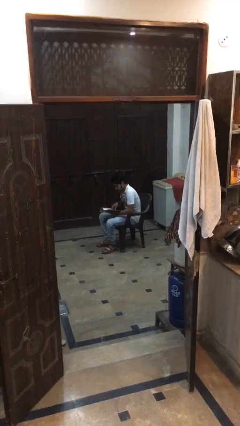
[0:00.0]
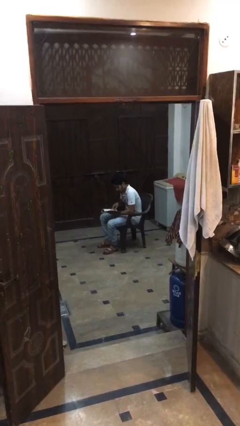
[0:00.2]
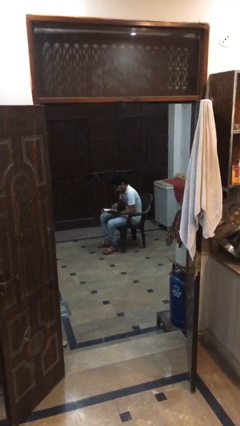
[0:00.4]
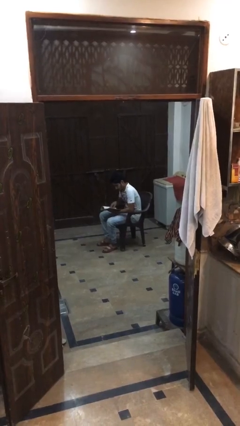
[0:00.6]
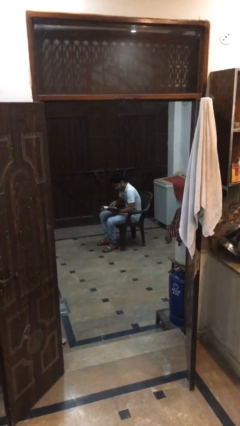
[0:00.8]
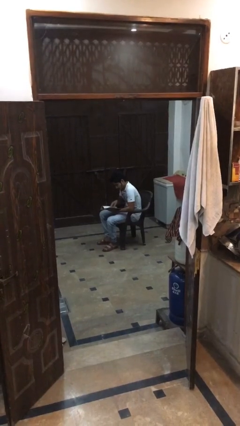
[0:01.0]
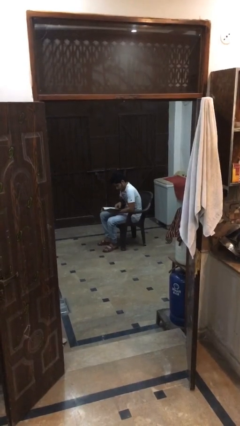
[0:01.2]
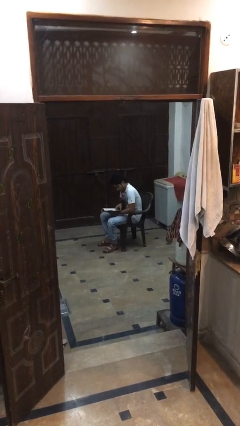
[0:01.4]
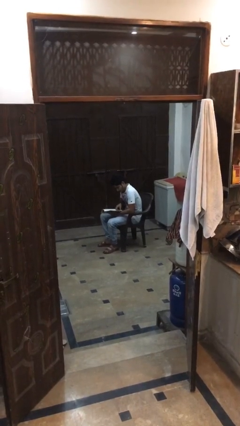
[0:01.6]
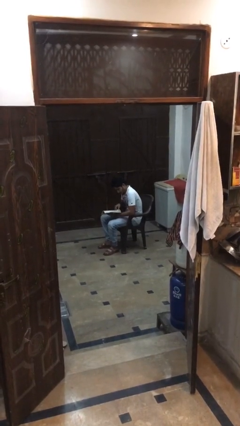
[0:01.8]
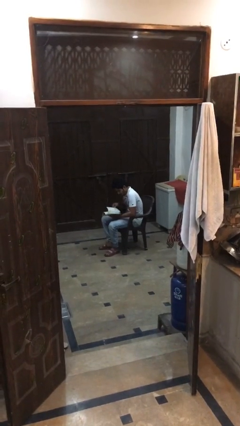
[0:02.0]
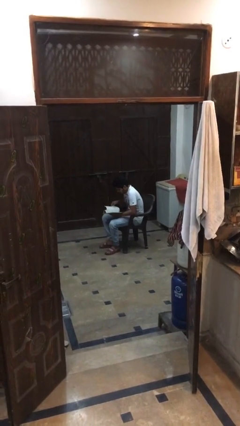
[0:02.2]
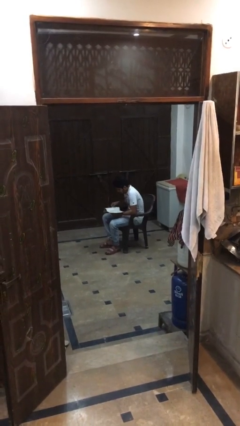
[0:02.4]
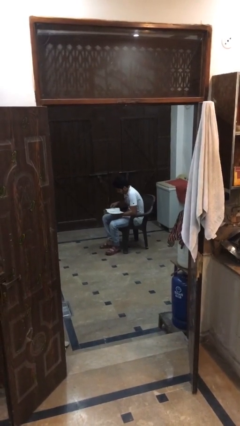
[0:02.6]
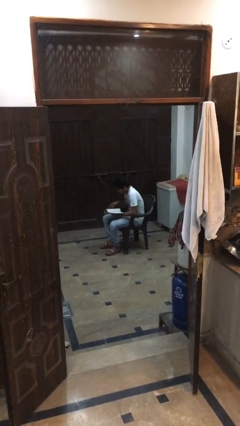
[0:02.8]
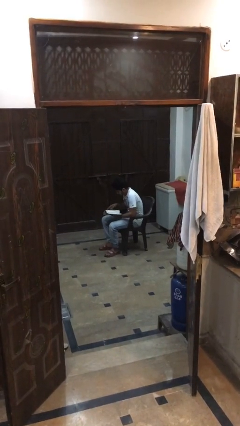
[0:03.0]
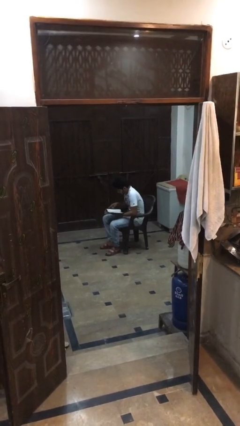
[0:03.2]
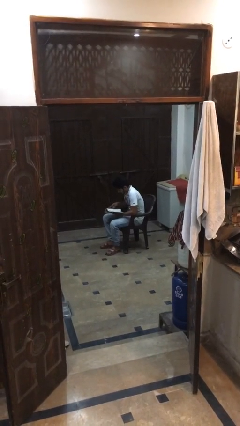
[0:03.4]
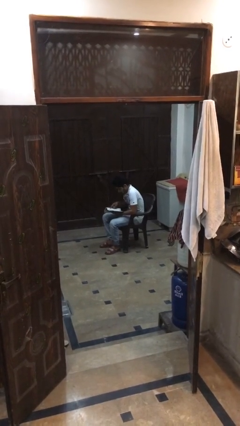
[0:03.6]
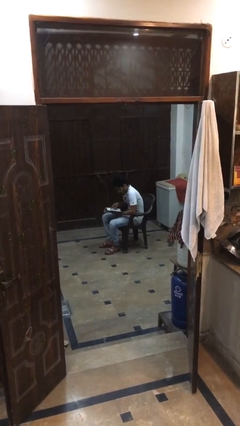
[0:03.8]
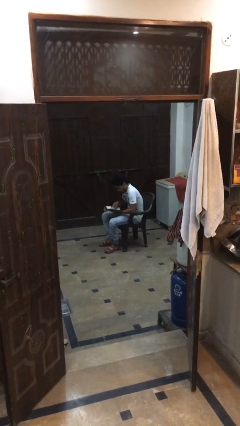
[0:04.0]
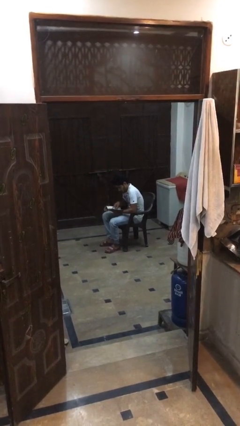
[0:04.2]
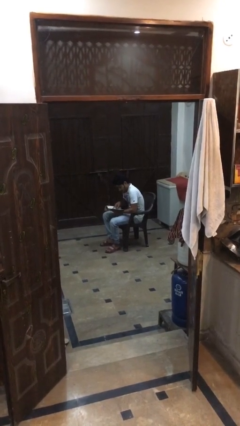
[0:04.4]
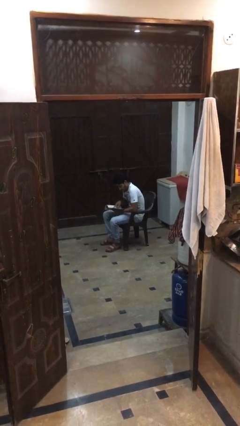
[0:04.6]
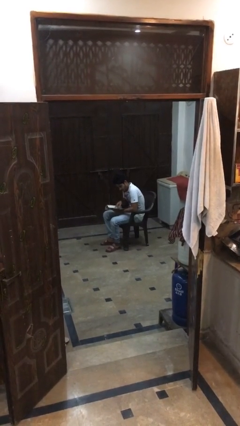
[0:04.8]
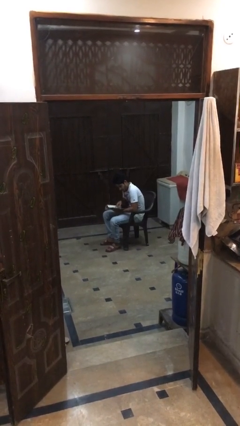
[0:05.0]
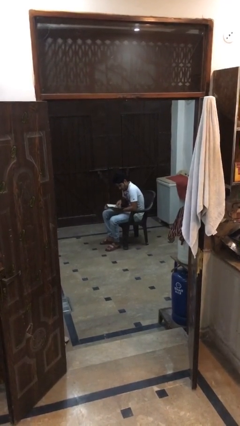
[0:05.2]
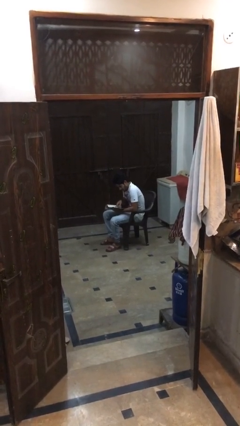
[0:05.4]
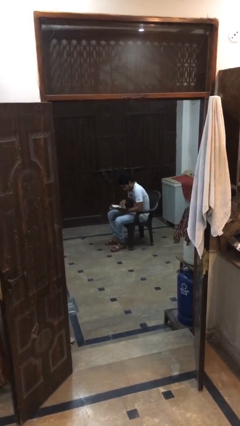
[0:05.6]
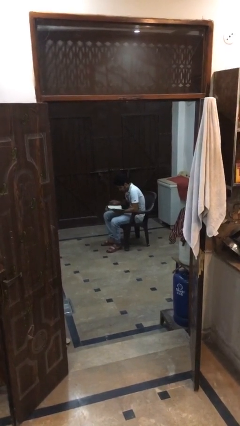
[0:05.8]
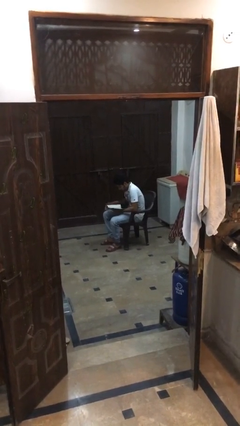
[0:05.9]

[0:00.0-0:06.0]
person reads document

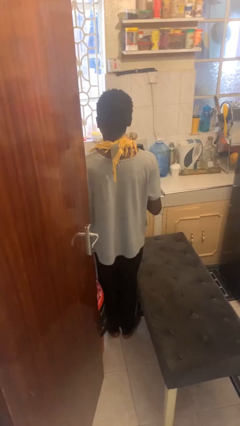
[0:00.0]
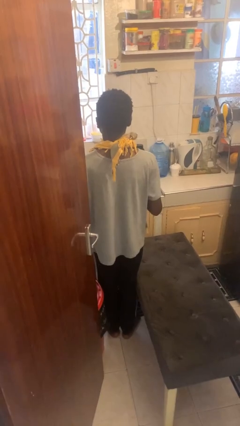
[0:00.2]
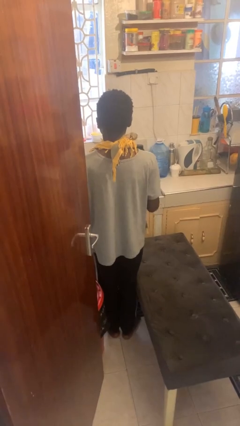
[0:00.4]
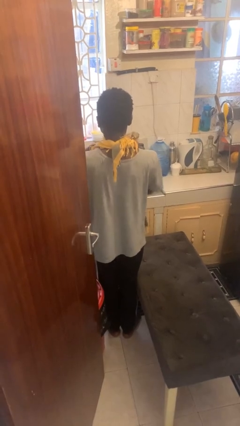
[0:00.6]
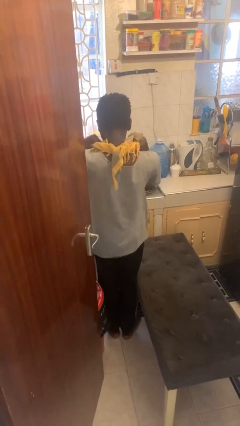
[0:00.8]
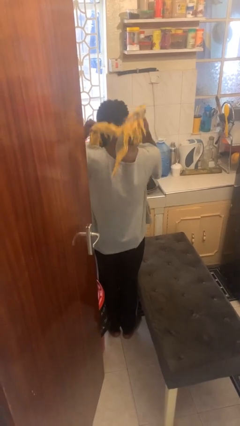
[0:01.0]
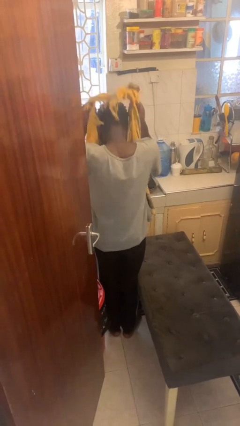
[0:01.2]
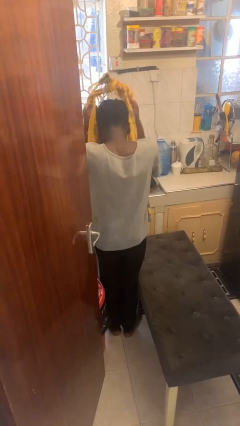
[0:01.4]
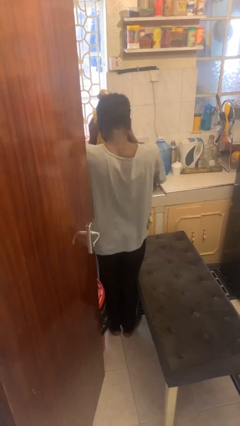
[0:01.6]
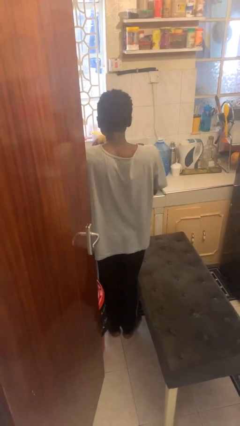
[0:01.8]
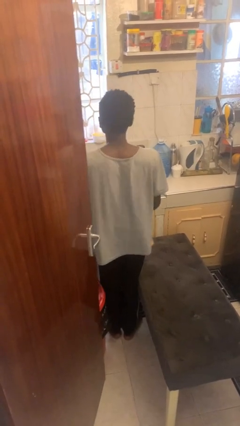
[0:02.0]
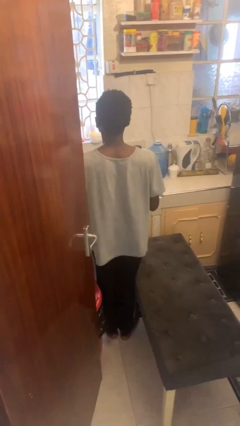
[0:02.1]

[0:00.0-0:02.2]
person takes off apron

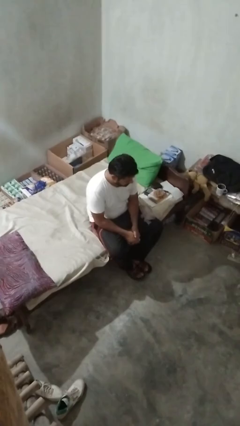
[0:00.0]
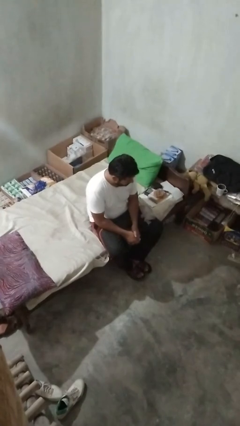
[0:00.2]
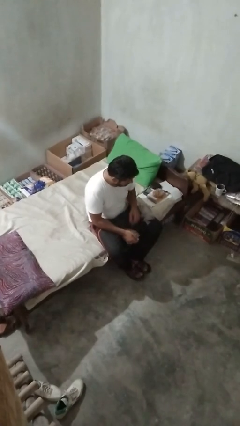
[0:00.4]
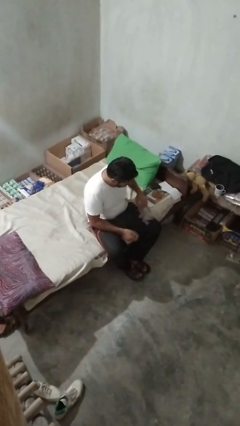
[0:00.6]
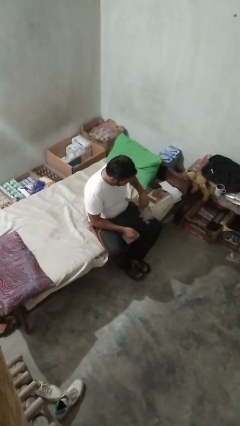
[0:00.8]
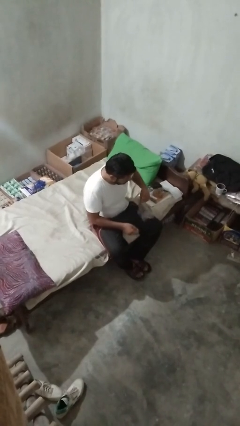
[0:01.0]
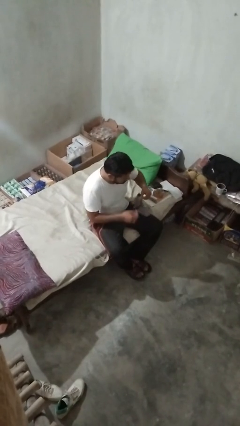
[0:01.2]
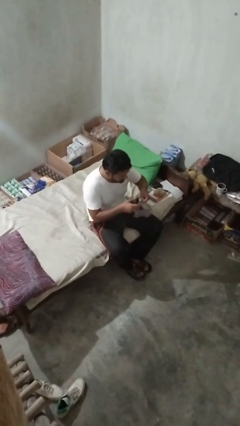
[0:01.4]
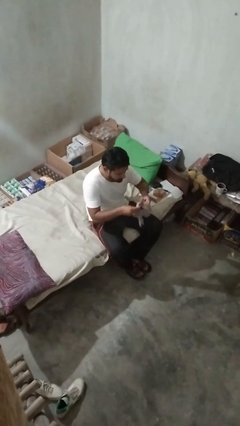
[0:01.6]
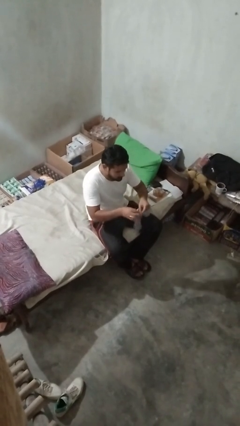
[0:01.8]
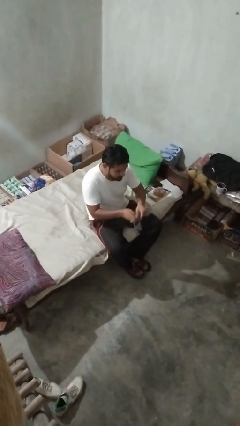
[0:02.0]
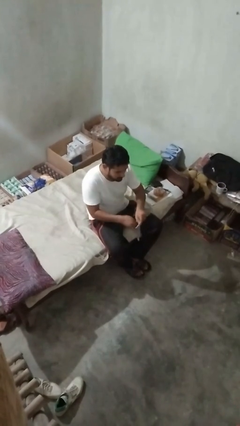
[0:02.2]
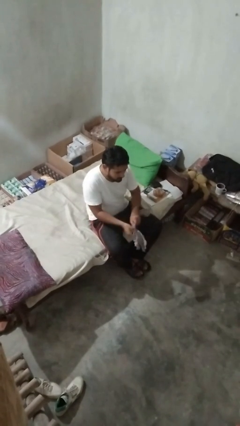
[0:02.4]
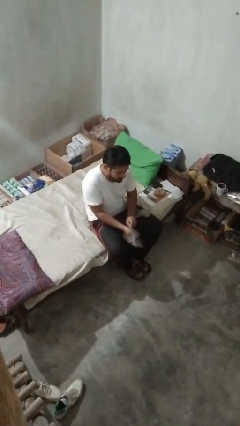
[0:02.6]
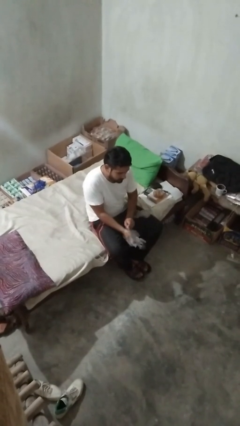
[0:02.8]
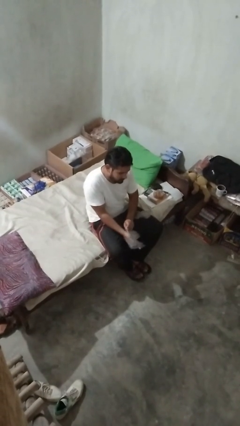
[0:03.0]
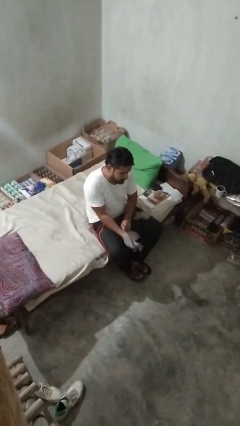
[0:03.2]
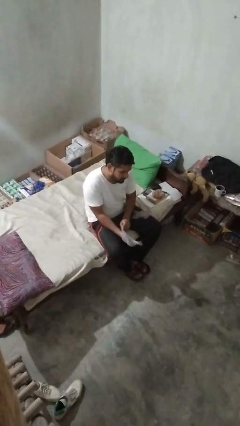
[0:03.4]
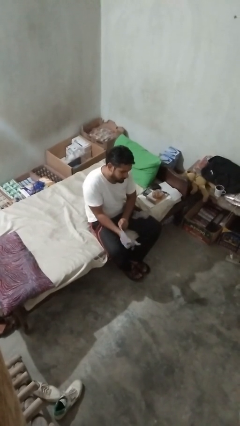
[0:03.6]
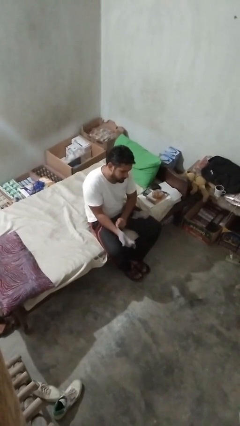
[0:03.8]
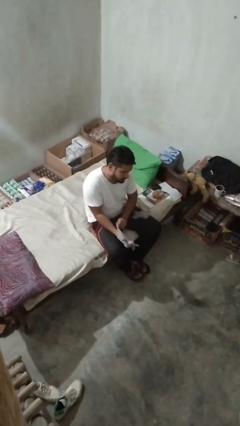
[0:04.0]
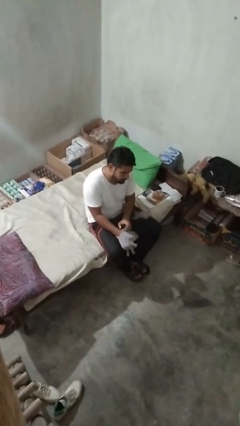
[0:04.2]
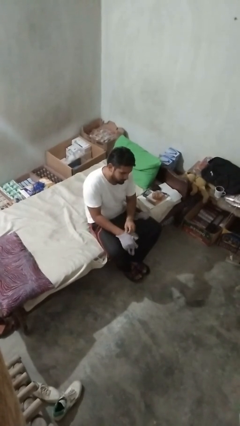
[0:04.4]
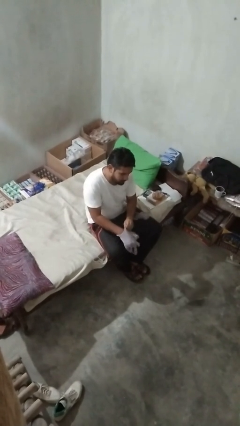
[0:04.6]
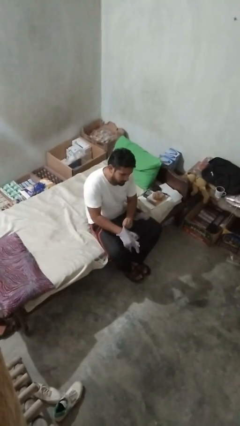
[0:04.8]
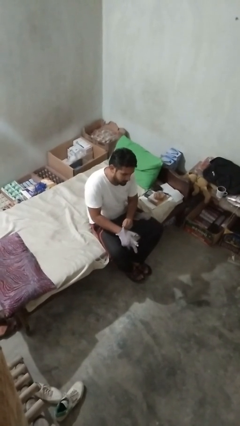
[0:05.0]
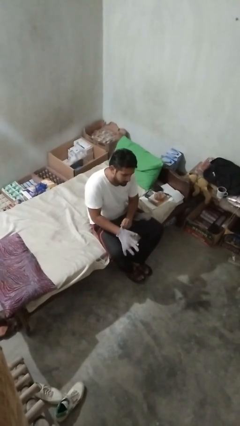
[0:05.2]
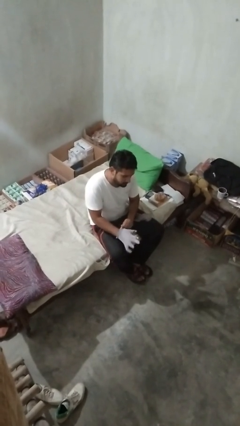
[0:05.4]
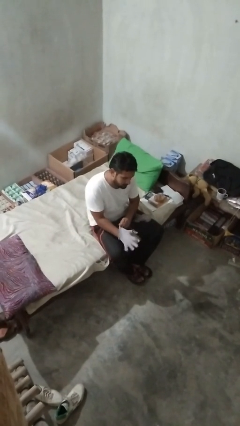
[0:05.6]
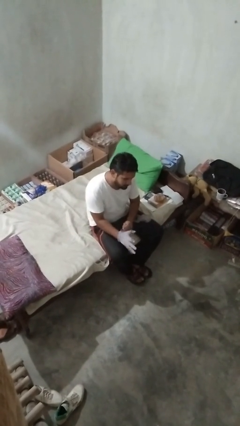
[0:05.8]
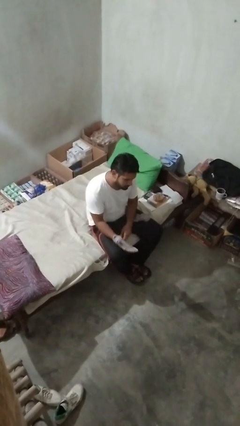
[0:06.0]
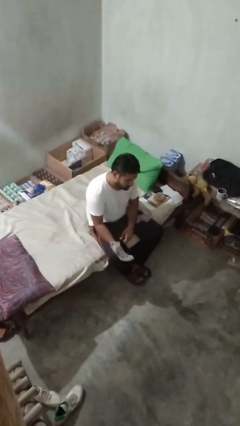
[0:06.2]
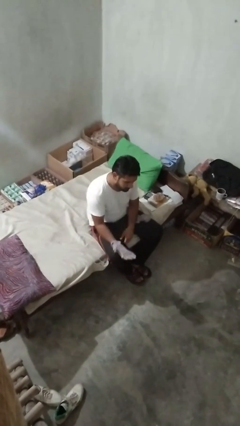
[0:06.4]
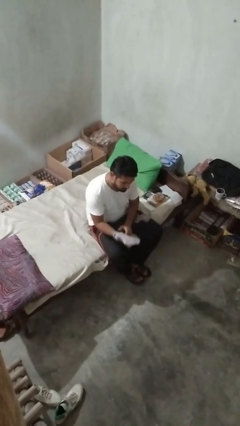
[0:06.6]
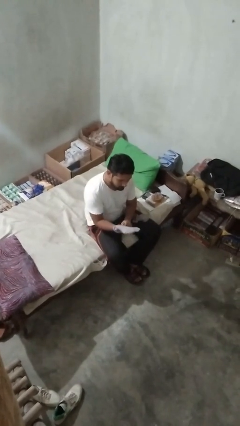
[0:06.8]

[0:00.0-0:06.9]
person puts on gloves

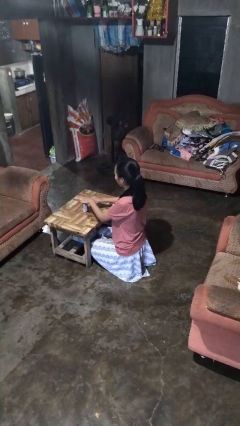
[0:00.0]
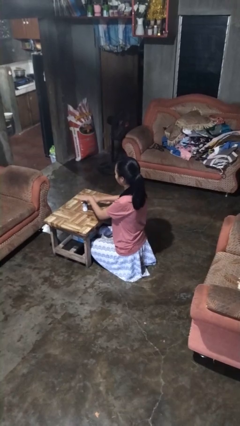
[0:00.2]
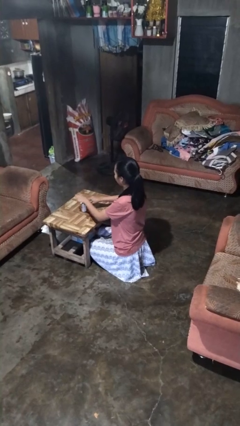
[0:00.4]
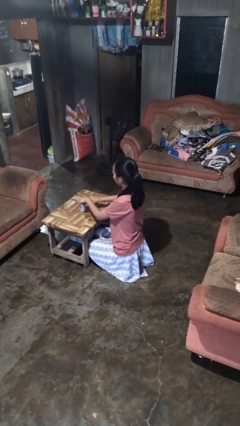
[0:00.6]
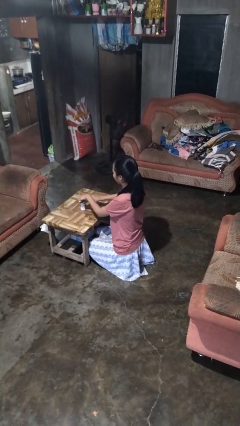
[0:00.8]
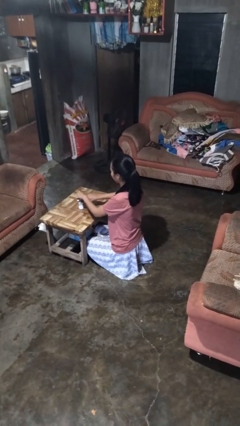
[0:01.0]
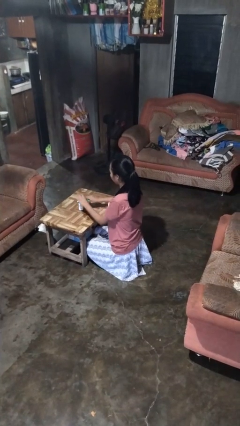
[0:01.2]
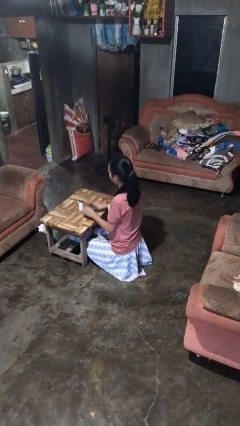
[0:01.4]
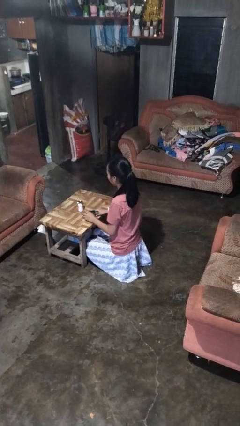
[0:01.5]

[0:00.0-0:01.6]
person opens can with can opener

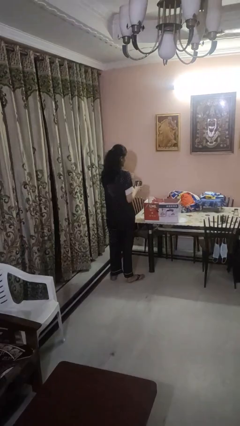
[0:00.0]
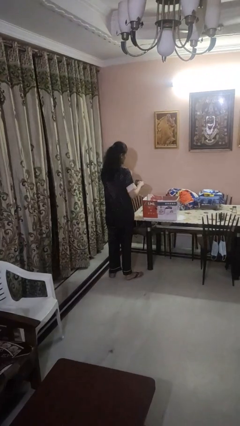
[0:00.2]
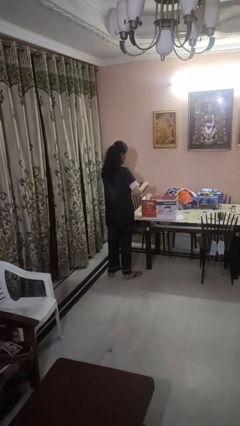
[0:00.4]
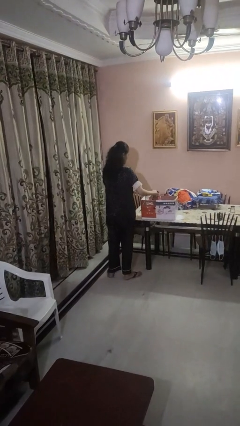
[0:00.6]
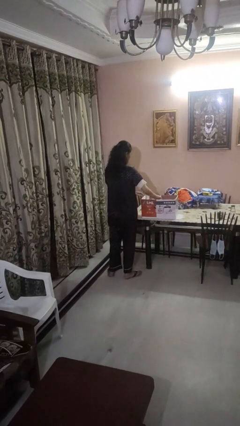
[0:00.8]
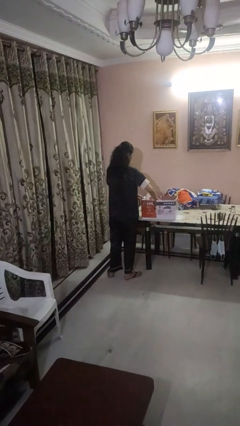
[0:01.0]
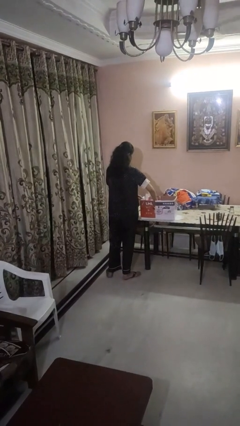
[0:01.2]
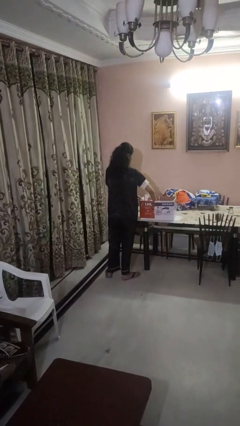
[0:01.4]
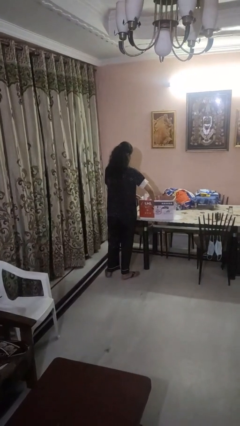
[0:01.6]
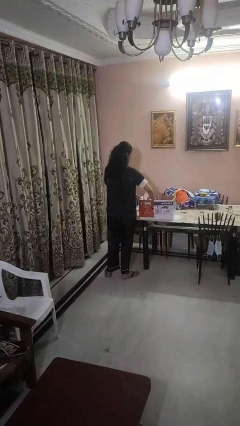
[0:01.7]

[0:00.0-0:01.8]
person puts object into box
